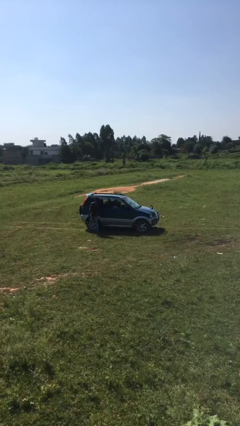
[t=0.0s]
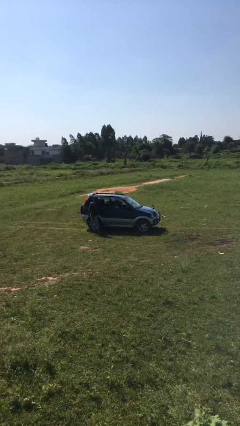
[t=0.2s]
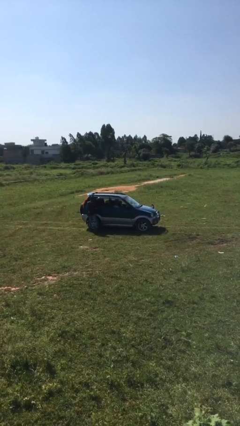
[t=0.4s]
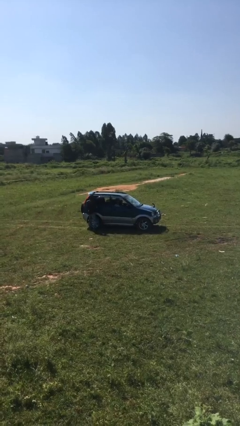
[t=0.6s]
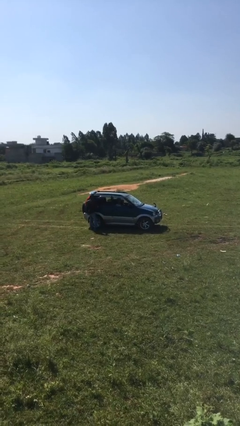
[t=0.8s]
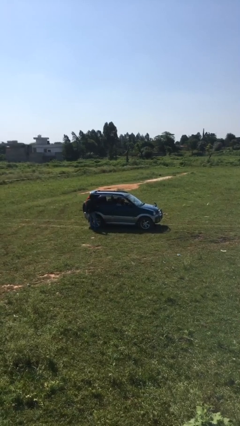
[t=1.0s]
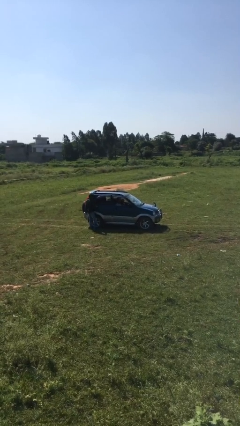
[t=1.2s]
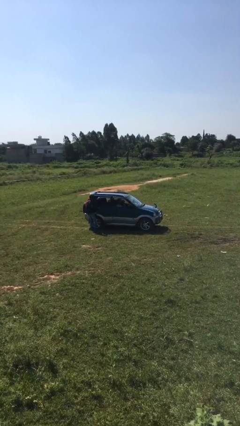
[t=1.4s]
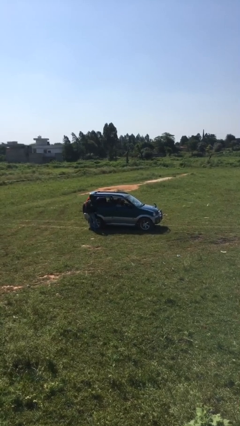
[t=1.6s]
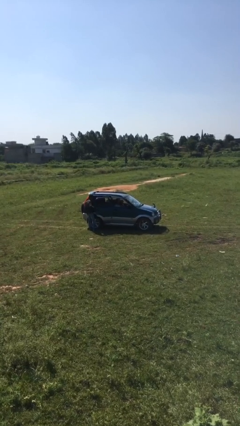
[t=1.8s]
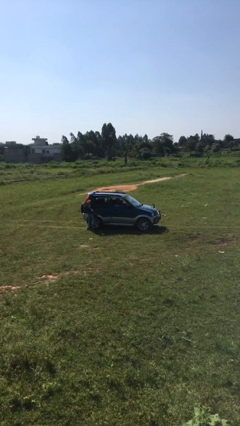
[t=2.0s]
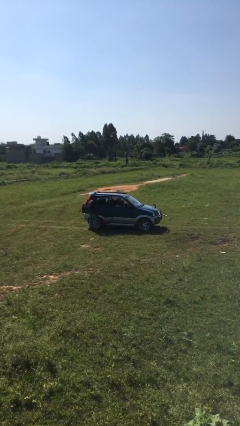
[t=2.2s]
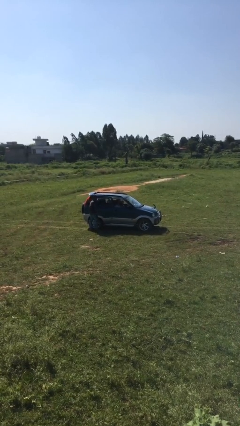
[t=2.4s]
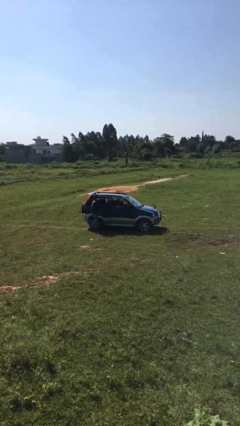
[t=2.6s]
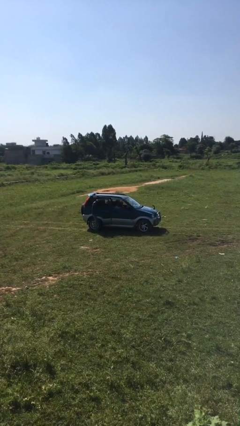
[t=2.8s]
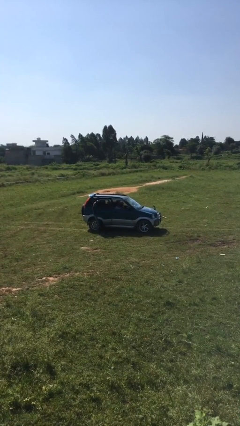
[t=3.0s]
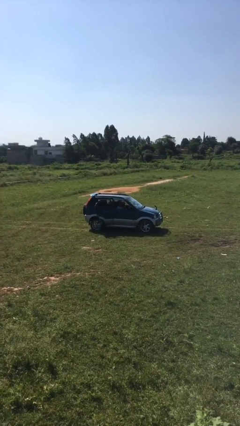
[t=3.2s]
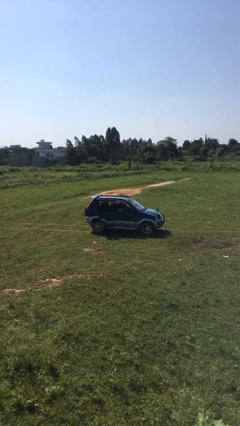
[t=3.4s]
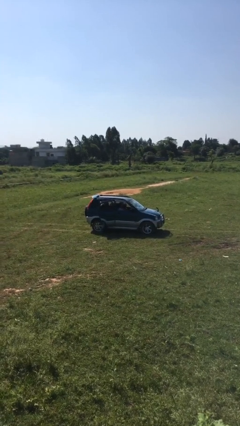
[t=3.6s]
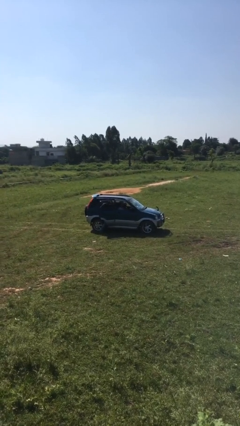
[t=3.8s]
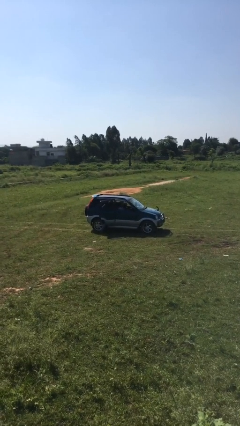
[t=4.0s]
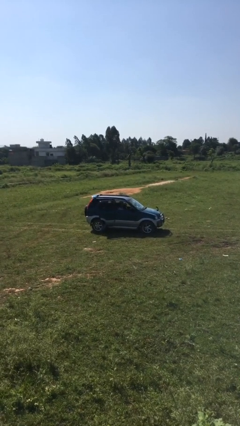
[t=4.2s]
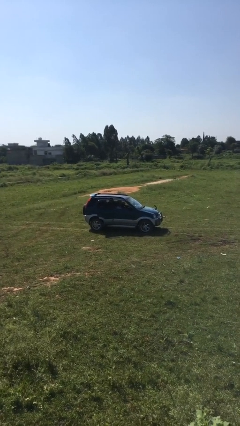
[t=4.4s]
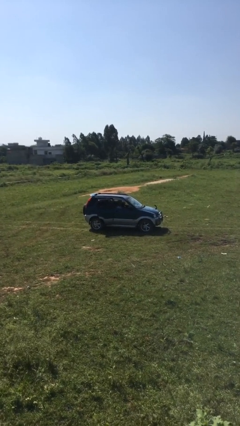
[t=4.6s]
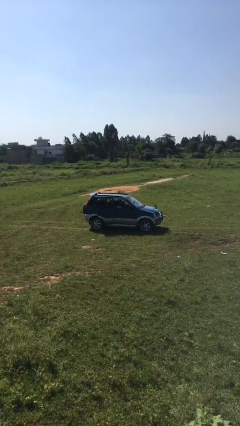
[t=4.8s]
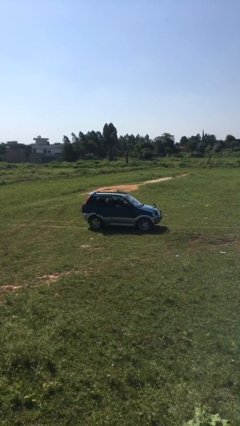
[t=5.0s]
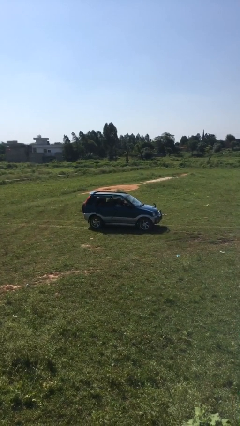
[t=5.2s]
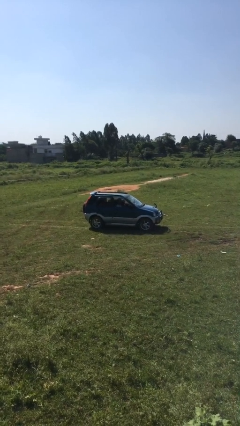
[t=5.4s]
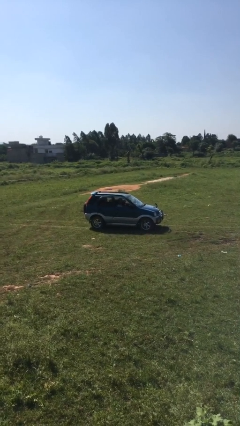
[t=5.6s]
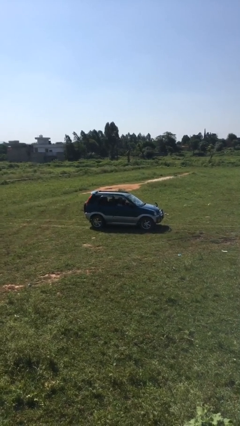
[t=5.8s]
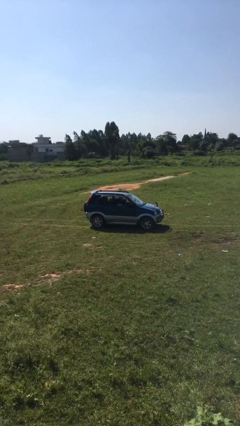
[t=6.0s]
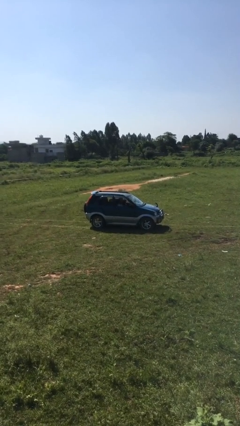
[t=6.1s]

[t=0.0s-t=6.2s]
car picks up person

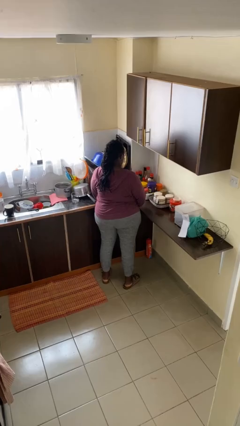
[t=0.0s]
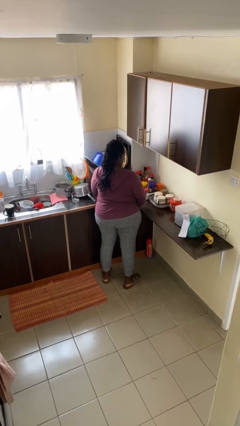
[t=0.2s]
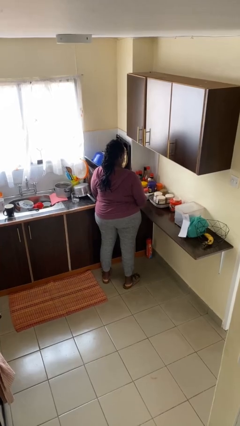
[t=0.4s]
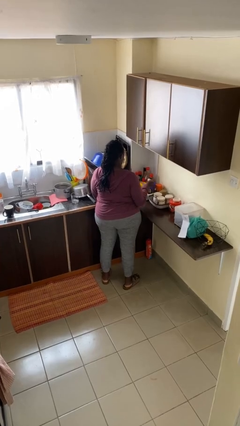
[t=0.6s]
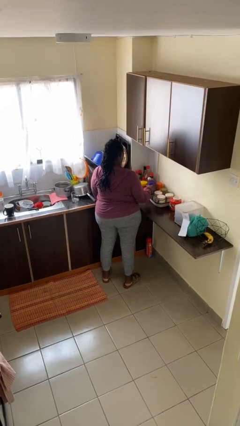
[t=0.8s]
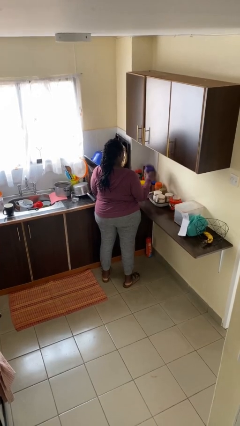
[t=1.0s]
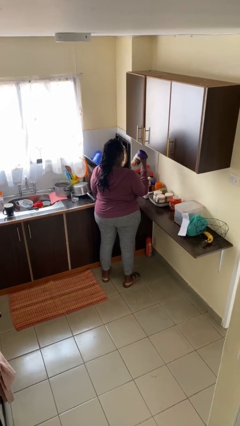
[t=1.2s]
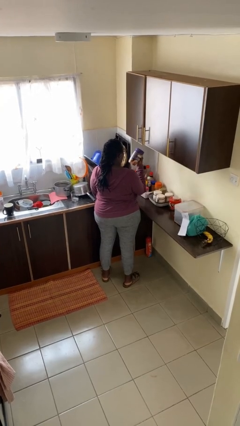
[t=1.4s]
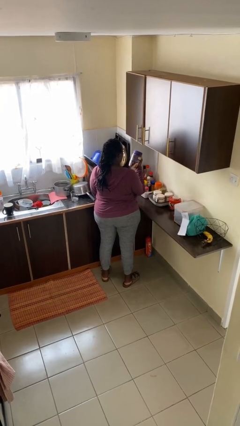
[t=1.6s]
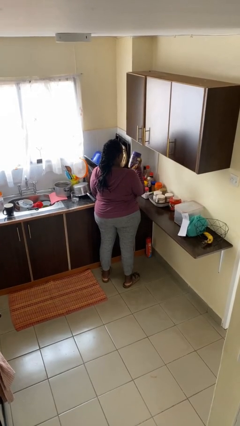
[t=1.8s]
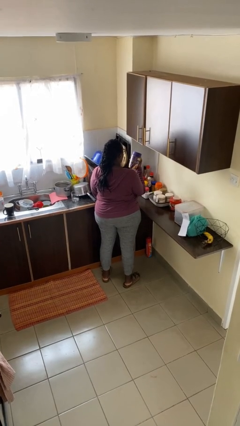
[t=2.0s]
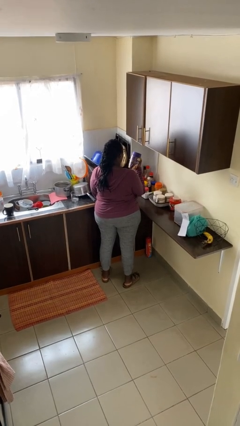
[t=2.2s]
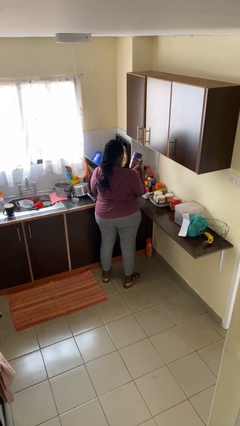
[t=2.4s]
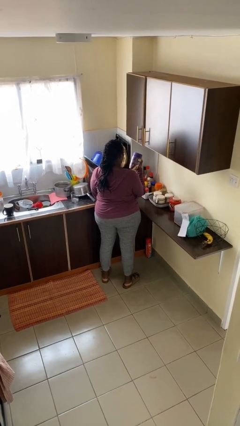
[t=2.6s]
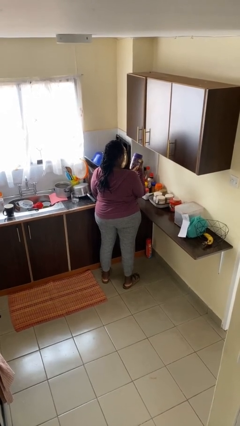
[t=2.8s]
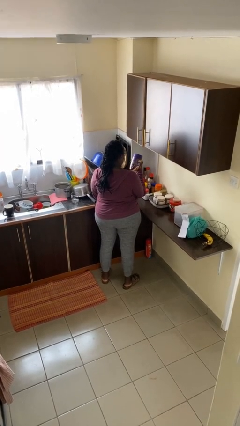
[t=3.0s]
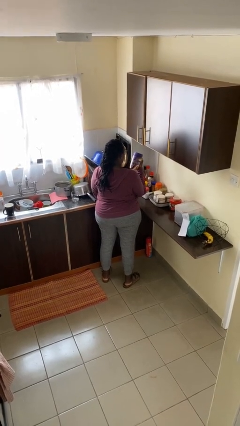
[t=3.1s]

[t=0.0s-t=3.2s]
person picks up object from countertop

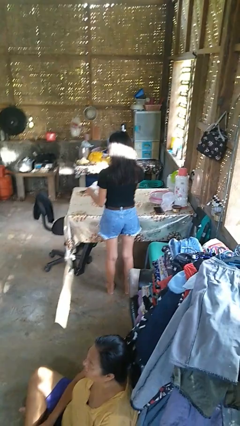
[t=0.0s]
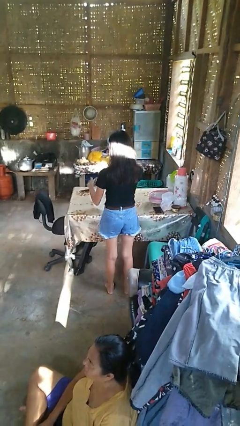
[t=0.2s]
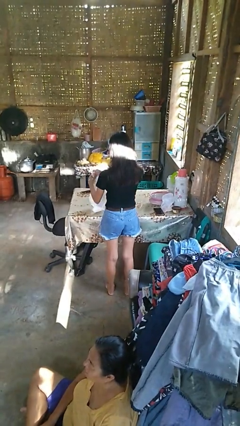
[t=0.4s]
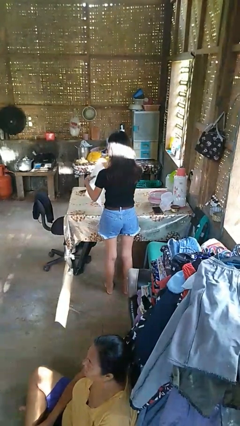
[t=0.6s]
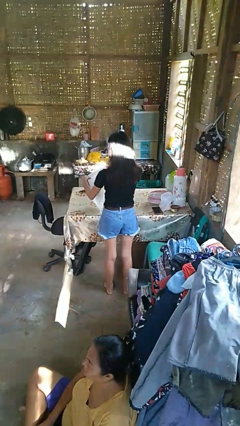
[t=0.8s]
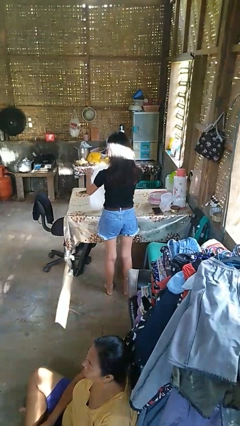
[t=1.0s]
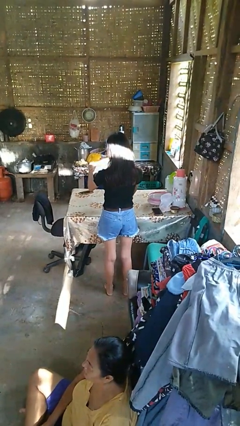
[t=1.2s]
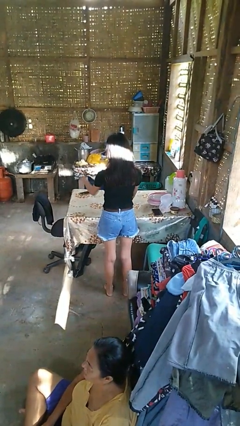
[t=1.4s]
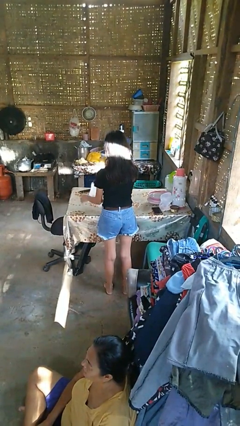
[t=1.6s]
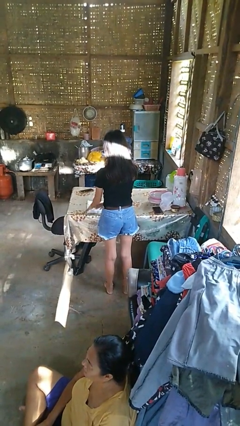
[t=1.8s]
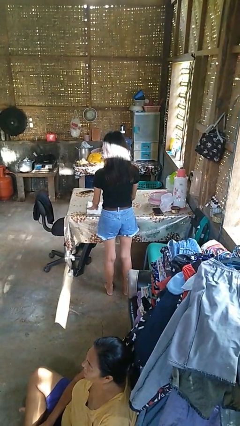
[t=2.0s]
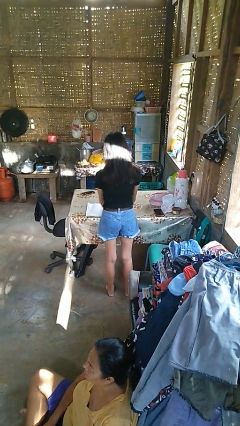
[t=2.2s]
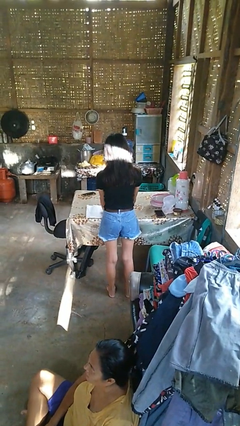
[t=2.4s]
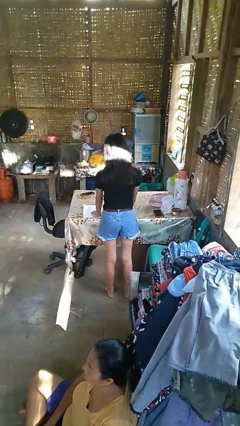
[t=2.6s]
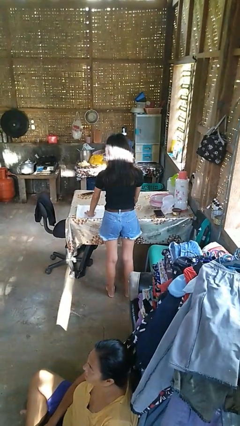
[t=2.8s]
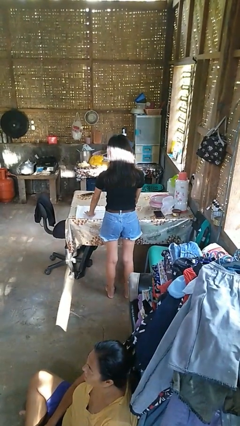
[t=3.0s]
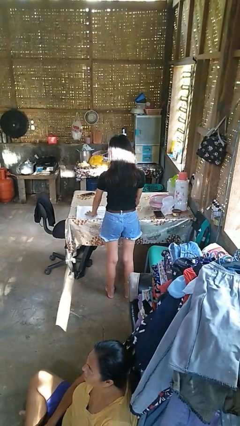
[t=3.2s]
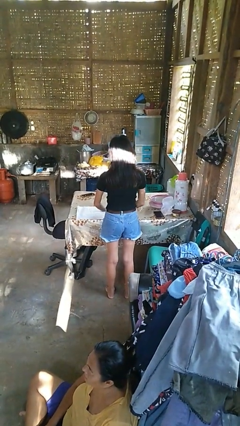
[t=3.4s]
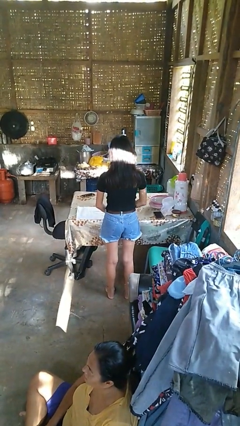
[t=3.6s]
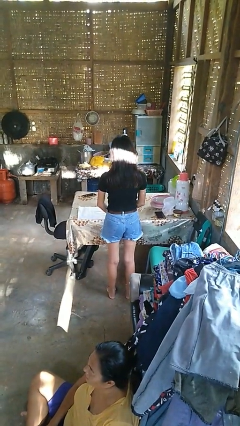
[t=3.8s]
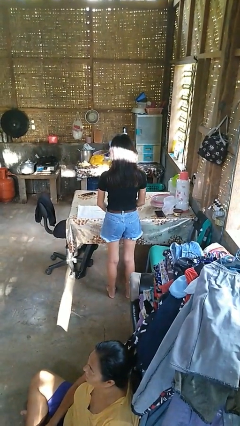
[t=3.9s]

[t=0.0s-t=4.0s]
person spreads tablecloth

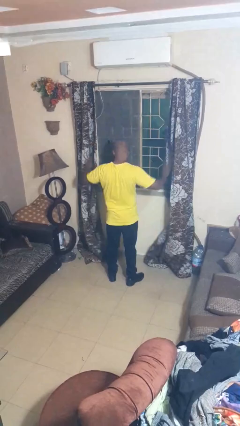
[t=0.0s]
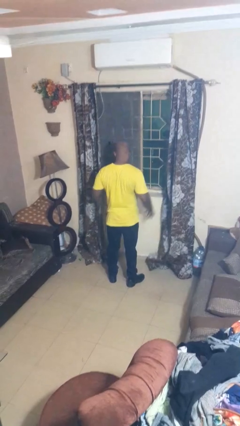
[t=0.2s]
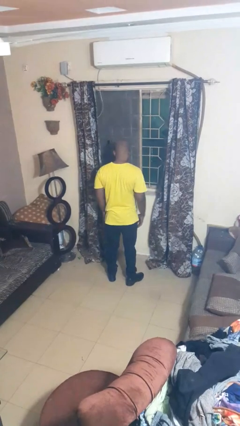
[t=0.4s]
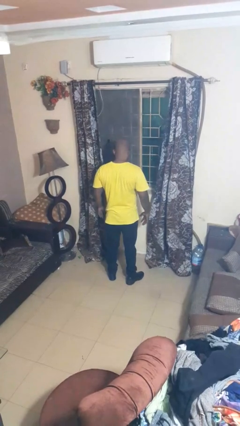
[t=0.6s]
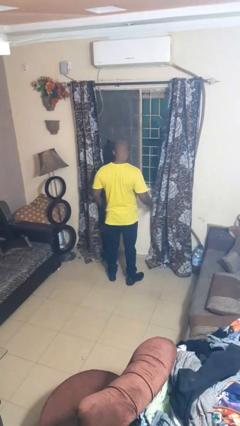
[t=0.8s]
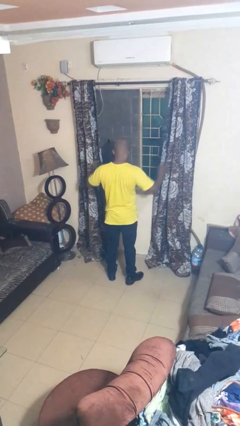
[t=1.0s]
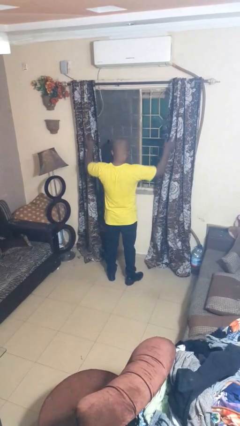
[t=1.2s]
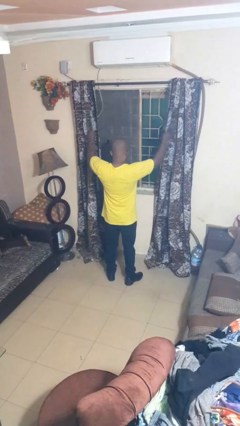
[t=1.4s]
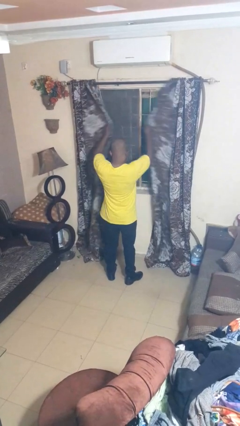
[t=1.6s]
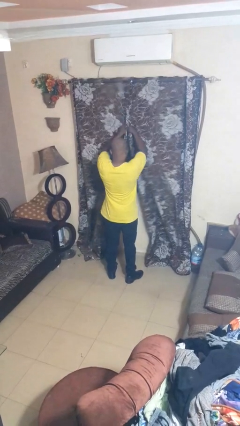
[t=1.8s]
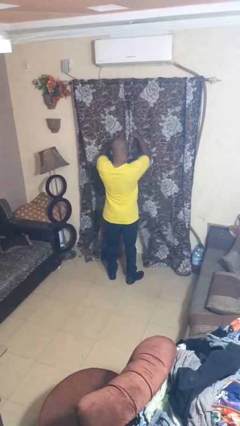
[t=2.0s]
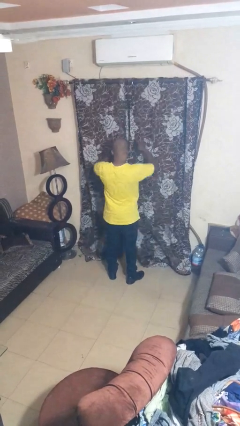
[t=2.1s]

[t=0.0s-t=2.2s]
person closes curtains

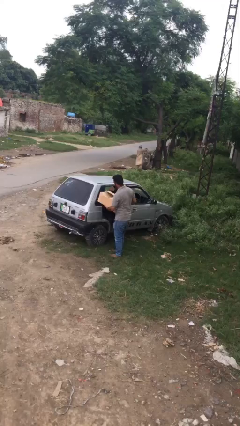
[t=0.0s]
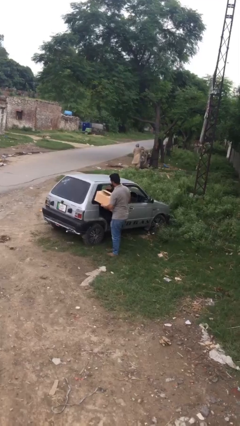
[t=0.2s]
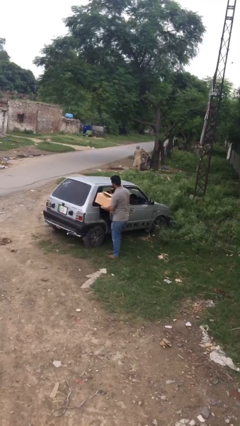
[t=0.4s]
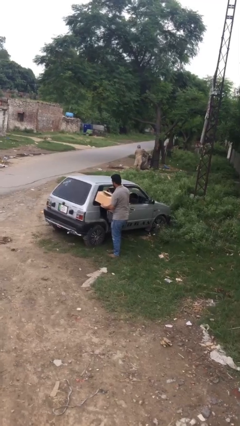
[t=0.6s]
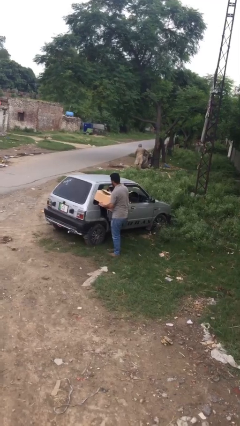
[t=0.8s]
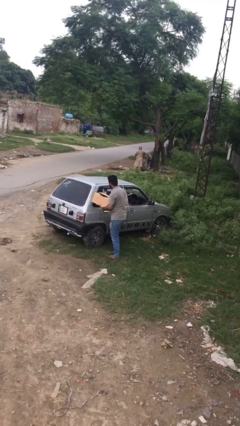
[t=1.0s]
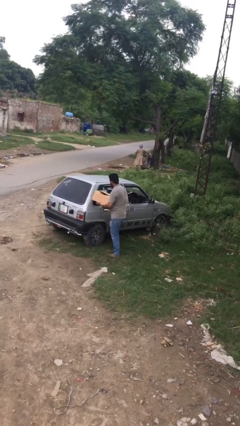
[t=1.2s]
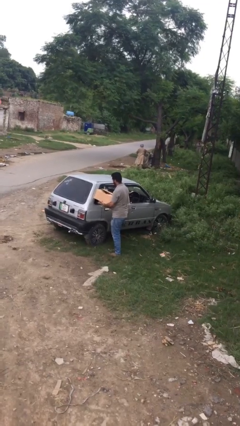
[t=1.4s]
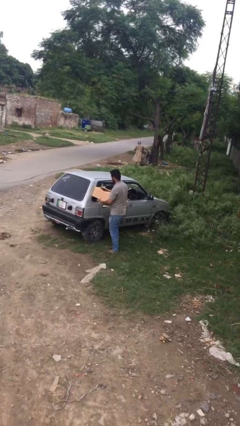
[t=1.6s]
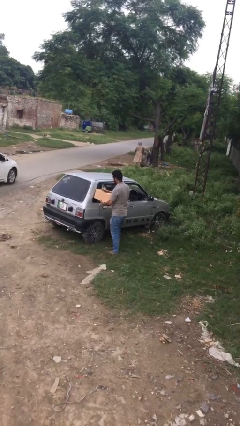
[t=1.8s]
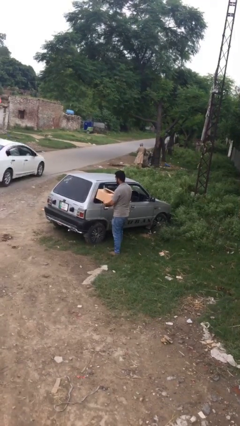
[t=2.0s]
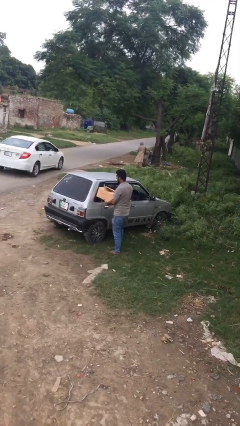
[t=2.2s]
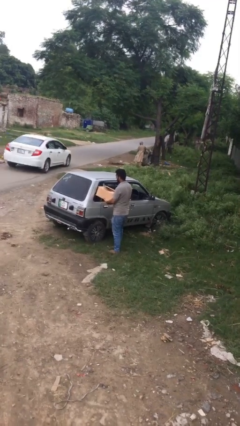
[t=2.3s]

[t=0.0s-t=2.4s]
person closes car door
